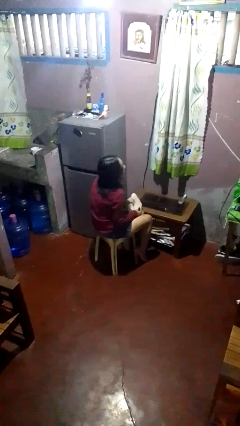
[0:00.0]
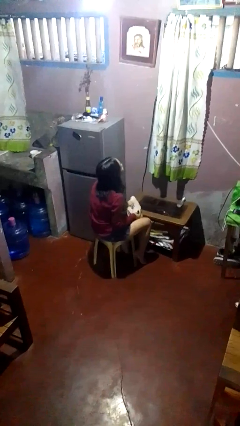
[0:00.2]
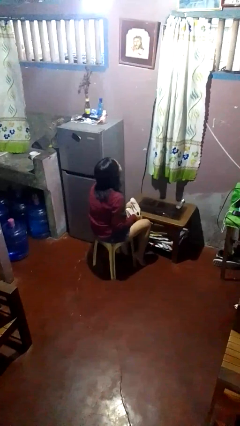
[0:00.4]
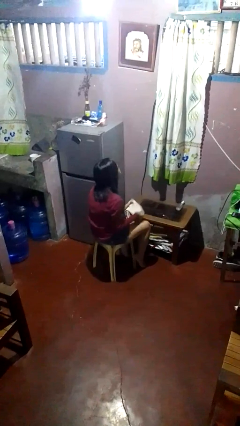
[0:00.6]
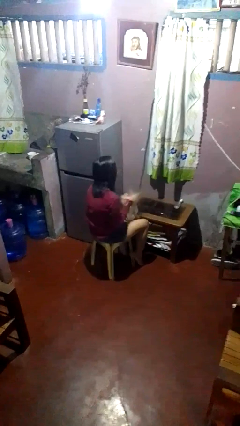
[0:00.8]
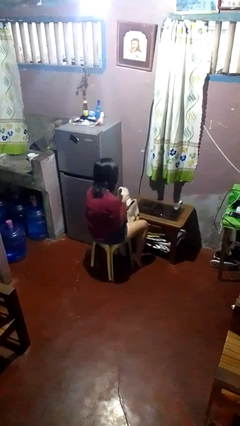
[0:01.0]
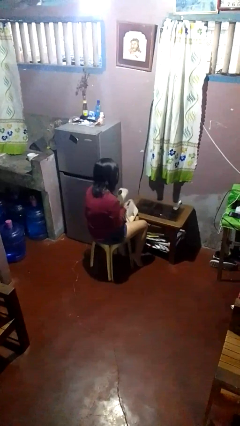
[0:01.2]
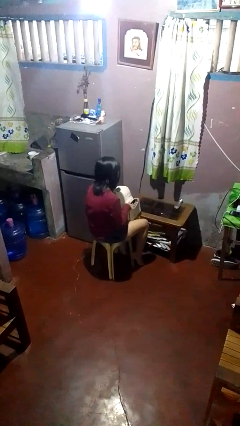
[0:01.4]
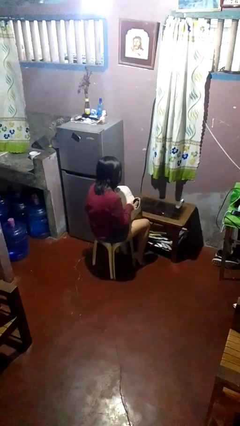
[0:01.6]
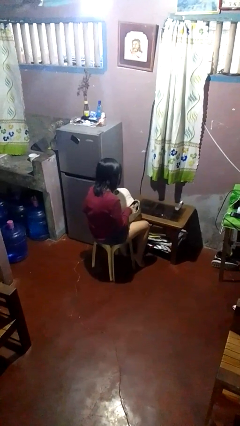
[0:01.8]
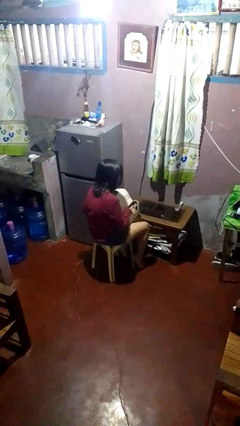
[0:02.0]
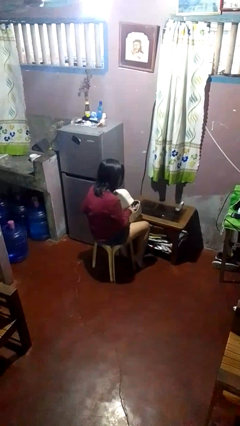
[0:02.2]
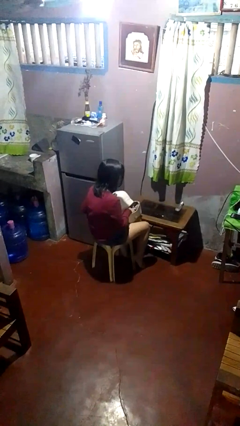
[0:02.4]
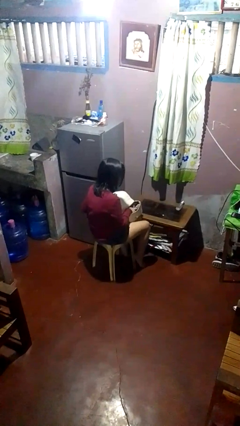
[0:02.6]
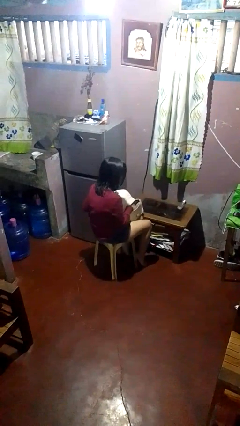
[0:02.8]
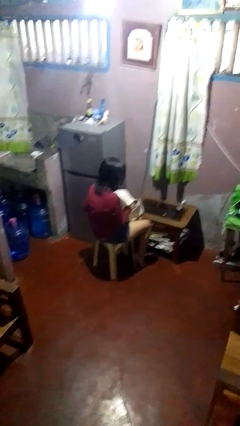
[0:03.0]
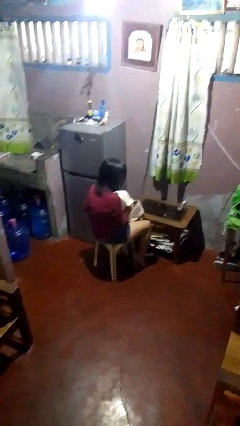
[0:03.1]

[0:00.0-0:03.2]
person searches in purse

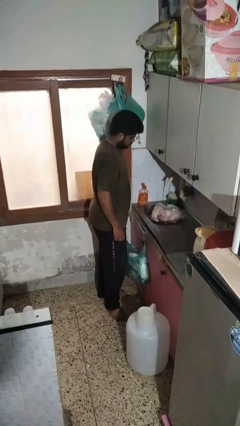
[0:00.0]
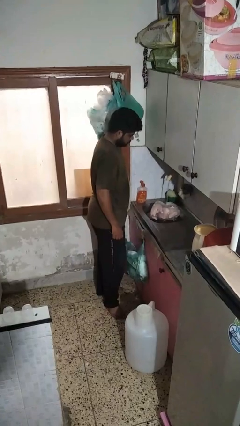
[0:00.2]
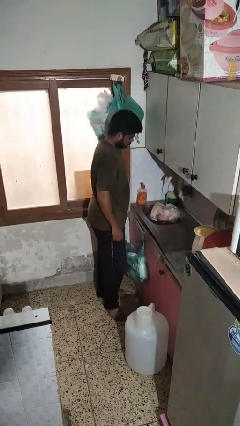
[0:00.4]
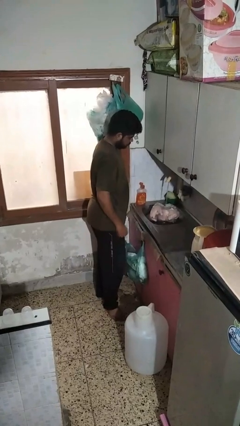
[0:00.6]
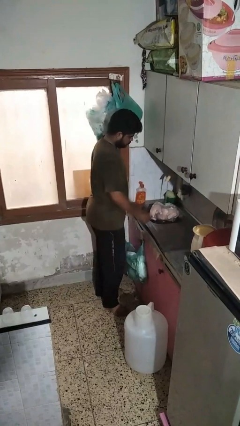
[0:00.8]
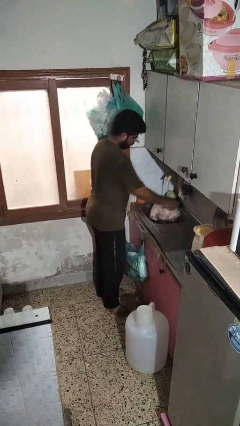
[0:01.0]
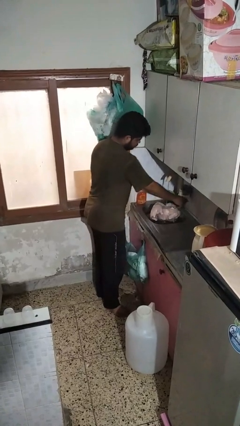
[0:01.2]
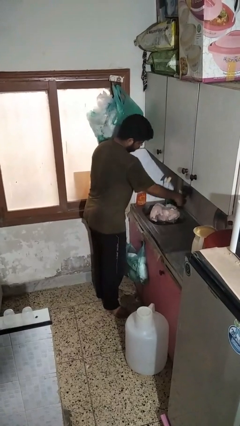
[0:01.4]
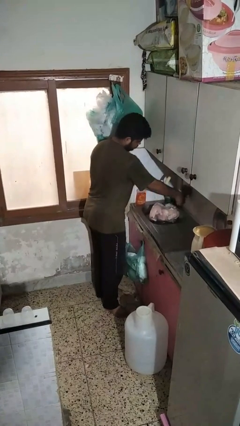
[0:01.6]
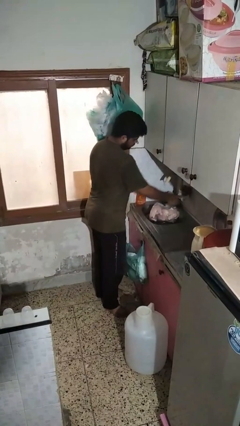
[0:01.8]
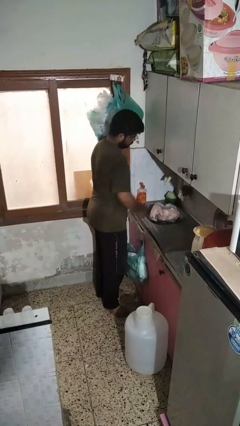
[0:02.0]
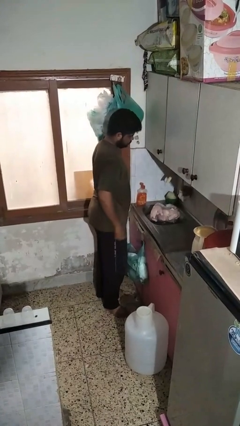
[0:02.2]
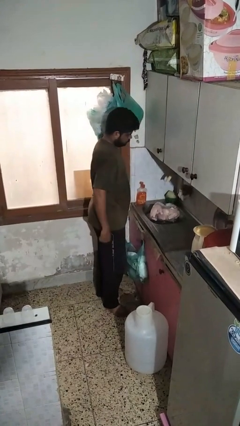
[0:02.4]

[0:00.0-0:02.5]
person turns off faucet

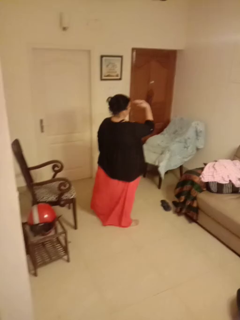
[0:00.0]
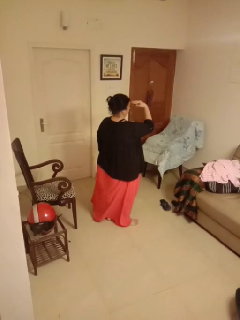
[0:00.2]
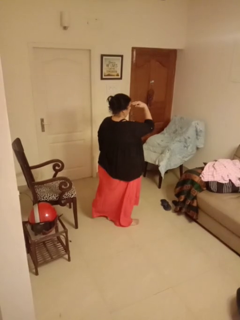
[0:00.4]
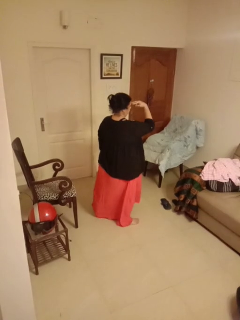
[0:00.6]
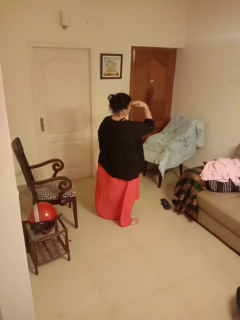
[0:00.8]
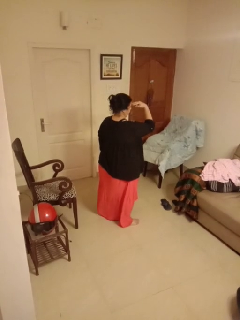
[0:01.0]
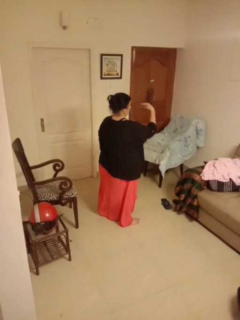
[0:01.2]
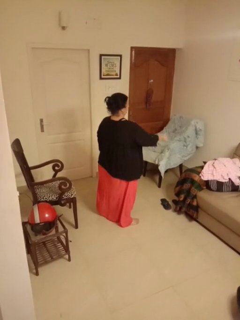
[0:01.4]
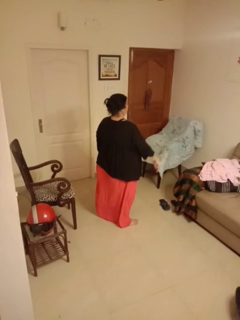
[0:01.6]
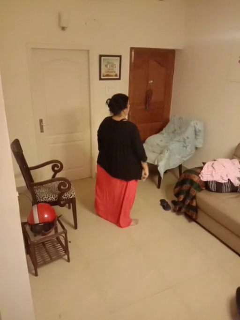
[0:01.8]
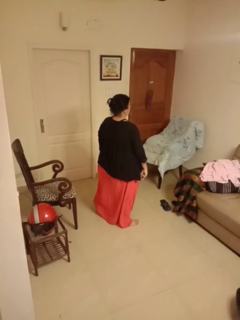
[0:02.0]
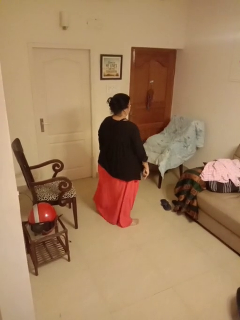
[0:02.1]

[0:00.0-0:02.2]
person gestures watch closely

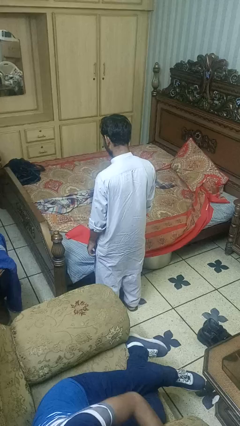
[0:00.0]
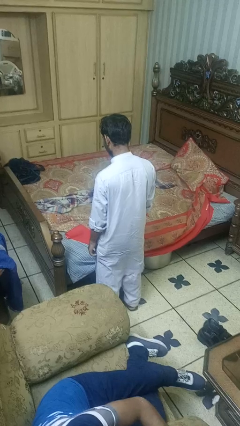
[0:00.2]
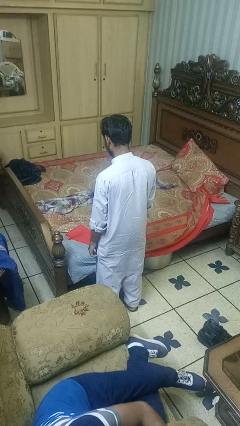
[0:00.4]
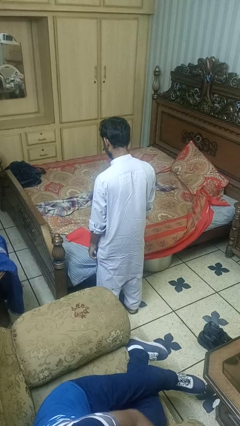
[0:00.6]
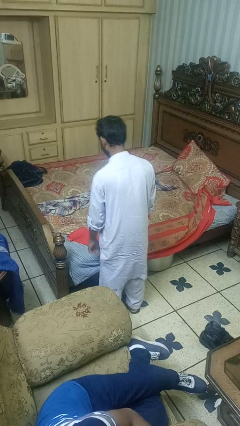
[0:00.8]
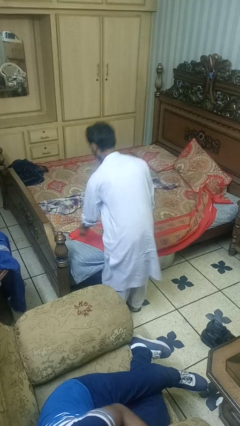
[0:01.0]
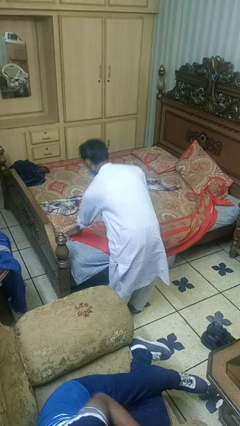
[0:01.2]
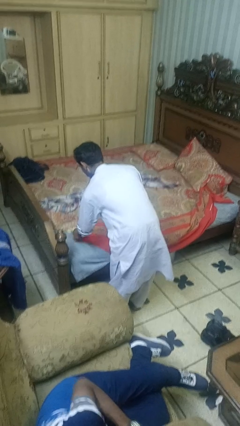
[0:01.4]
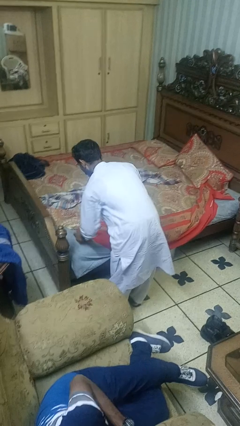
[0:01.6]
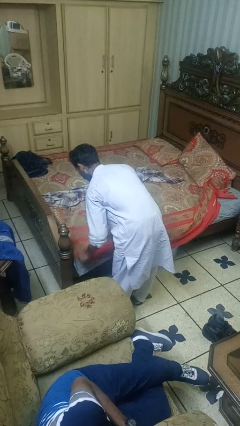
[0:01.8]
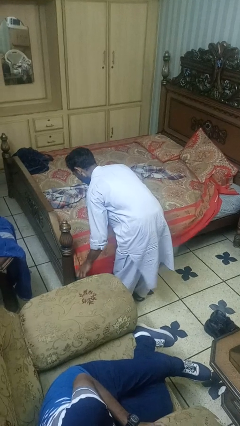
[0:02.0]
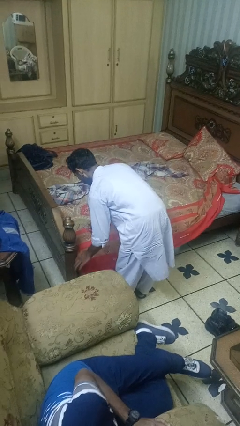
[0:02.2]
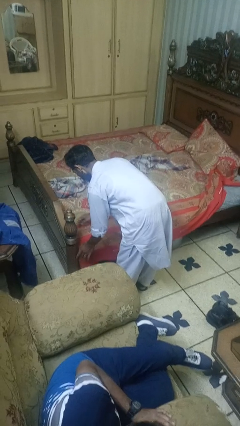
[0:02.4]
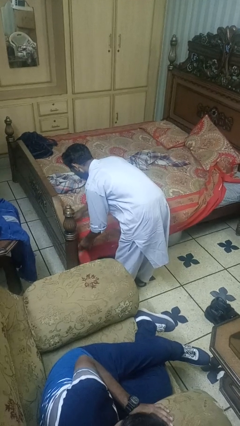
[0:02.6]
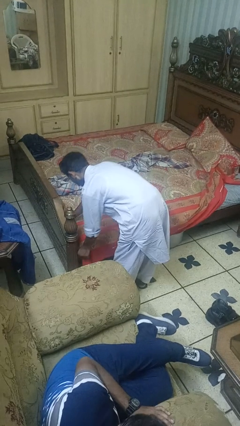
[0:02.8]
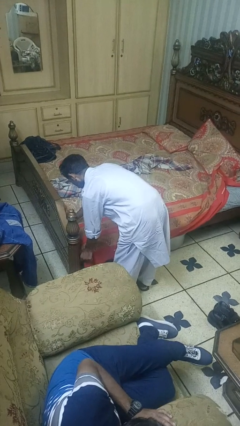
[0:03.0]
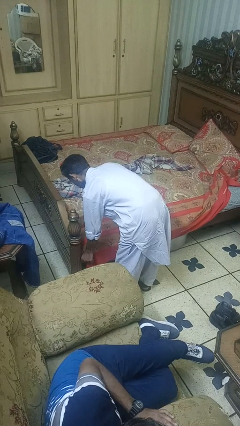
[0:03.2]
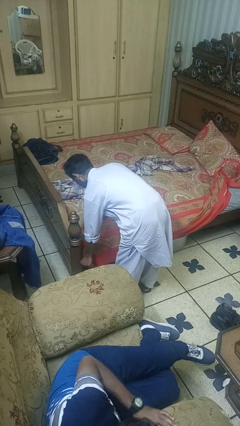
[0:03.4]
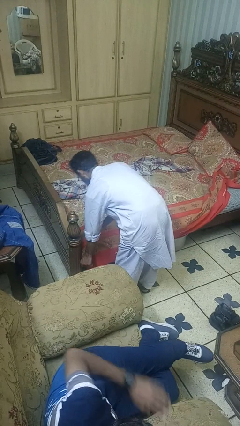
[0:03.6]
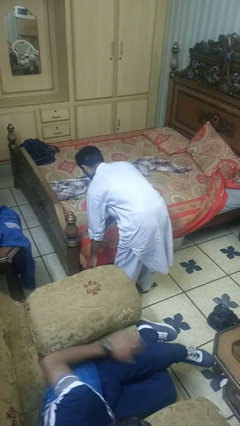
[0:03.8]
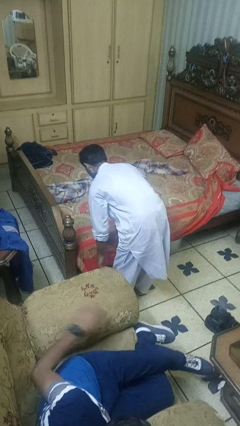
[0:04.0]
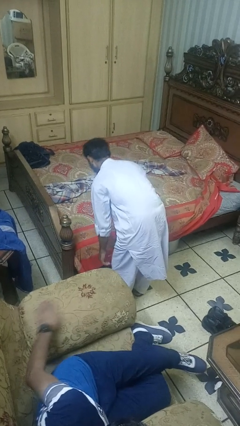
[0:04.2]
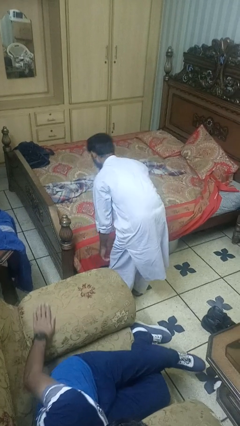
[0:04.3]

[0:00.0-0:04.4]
person makes bed

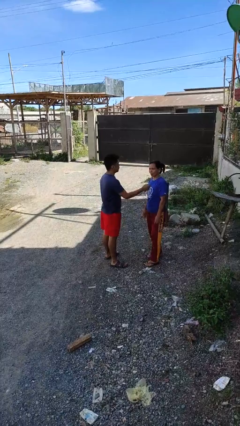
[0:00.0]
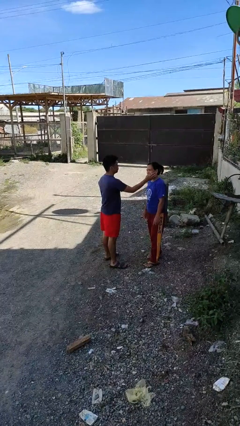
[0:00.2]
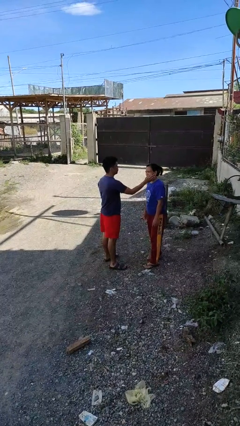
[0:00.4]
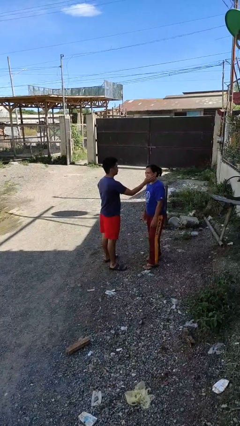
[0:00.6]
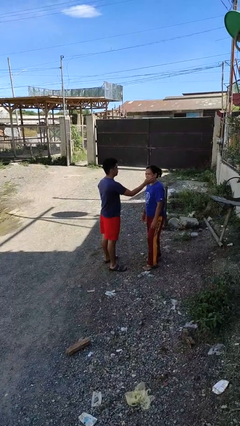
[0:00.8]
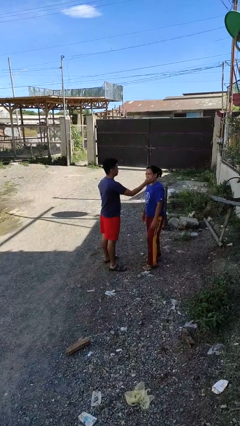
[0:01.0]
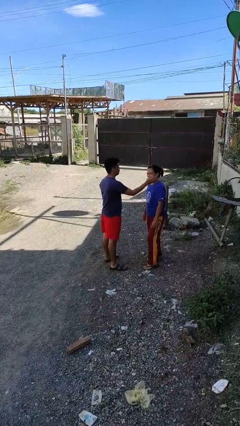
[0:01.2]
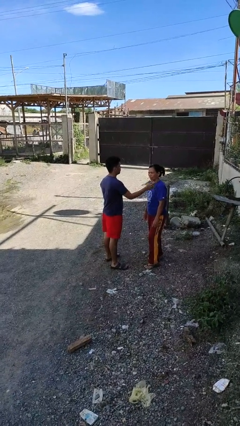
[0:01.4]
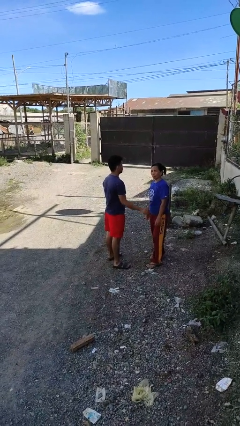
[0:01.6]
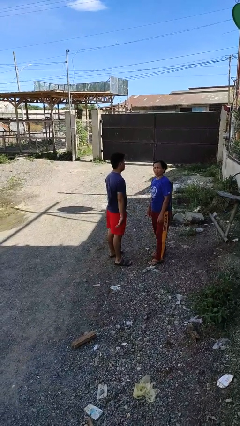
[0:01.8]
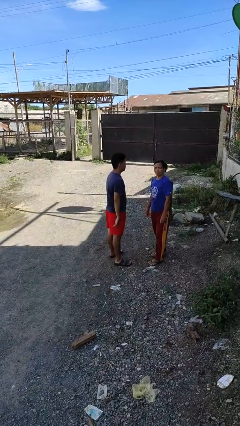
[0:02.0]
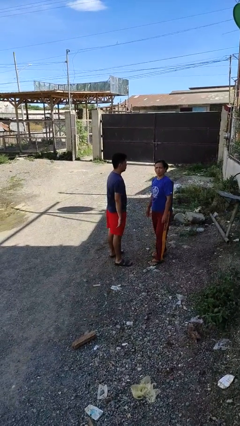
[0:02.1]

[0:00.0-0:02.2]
person touches face of person

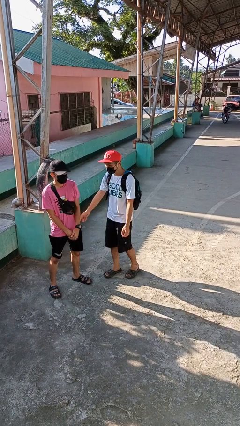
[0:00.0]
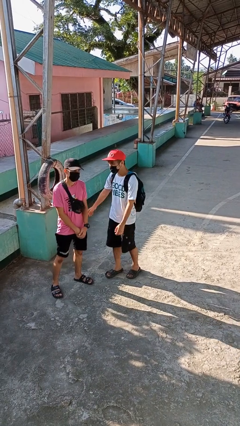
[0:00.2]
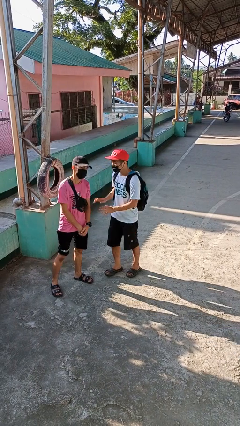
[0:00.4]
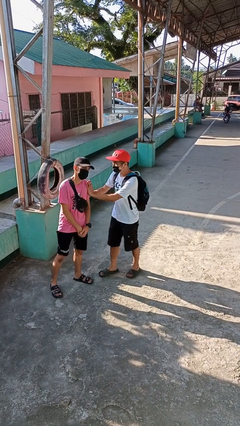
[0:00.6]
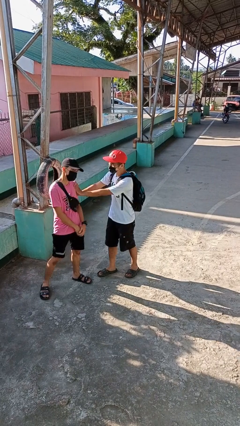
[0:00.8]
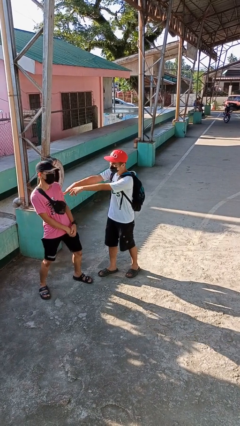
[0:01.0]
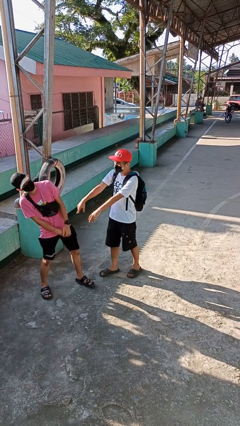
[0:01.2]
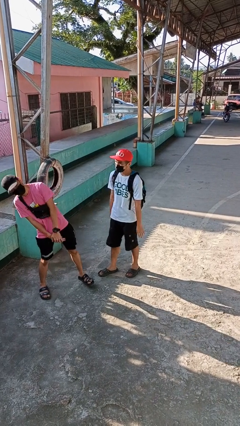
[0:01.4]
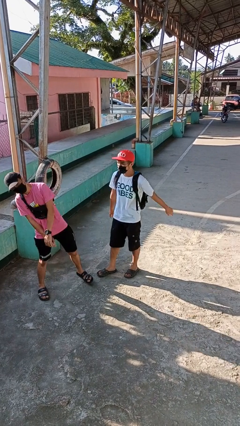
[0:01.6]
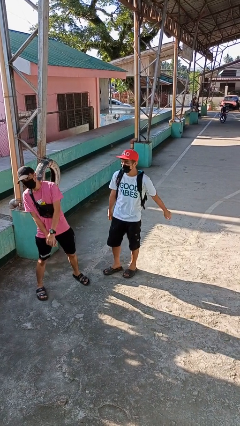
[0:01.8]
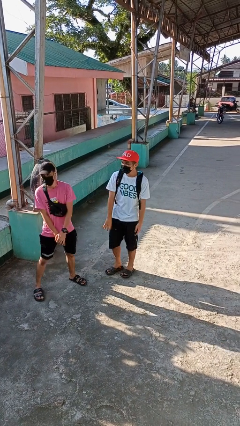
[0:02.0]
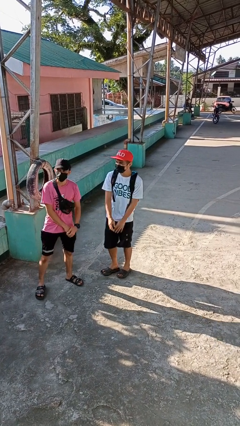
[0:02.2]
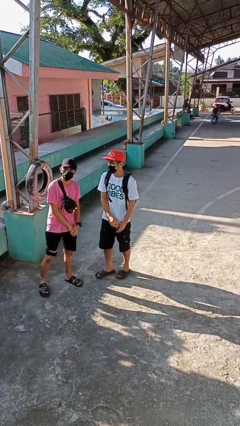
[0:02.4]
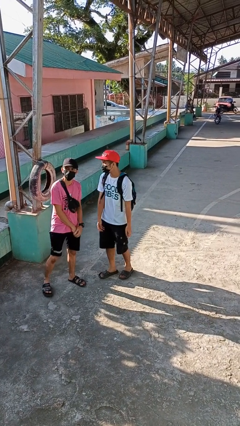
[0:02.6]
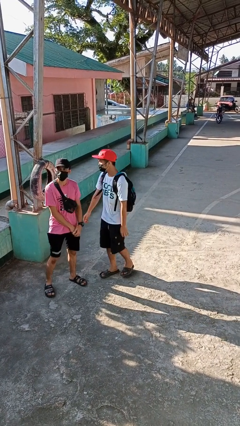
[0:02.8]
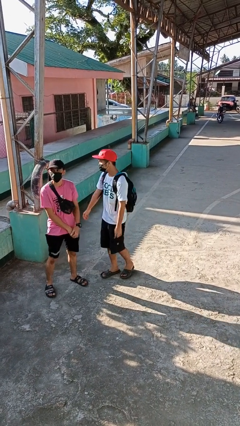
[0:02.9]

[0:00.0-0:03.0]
person shoves person

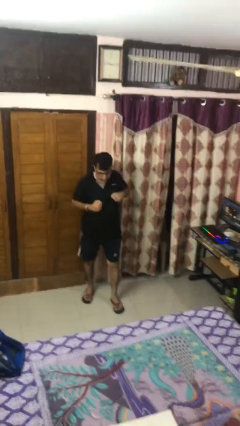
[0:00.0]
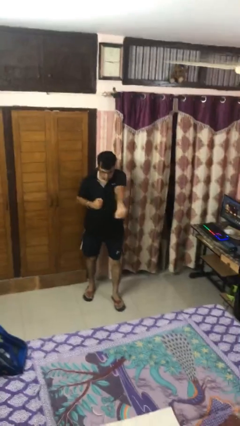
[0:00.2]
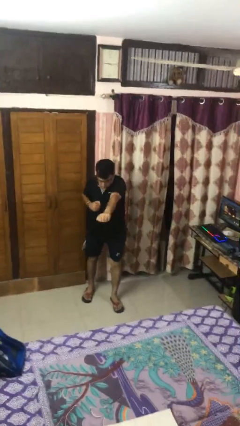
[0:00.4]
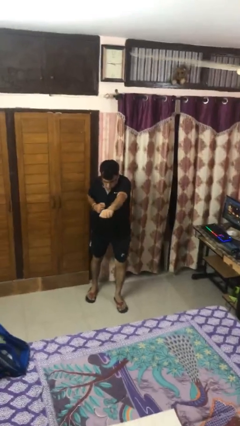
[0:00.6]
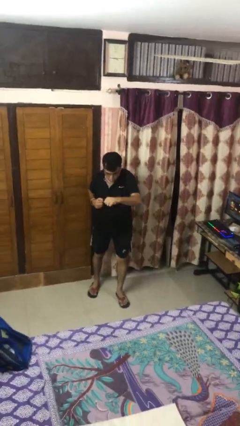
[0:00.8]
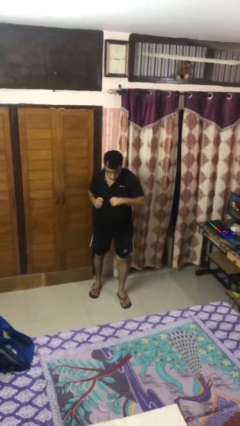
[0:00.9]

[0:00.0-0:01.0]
person punches
